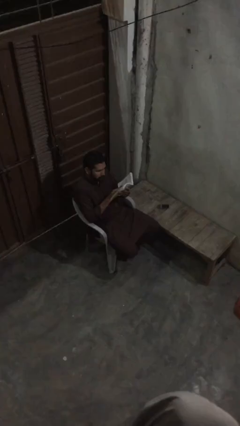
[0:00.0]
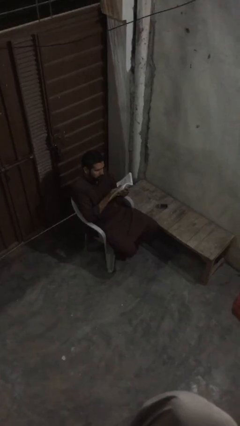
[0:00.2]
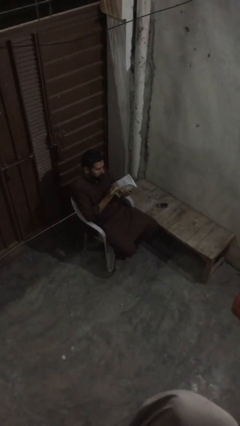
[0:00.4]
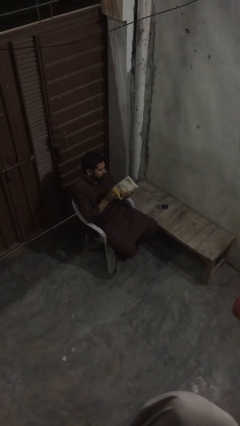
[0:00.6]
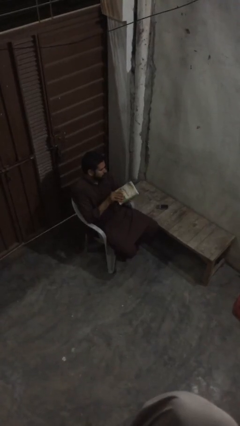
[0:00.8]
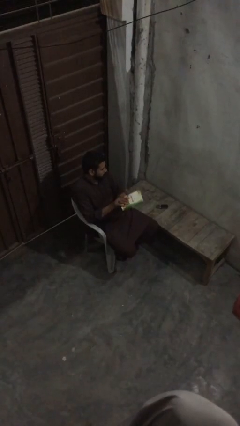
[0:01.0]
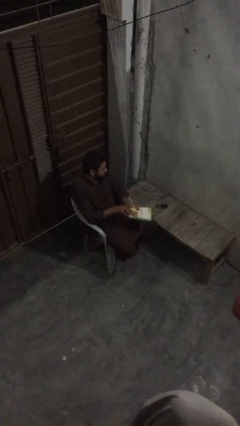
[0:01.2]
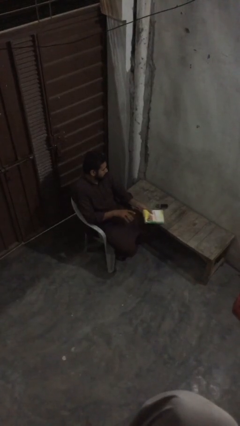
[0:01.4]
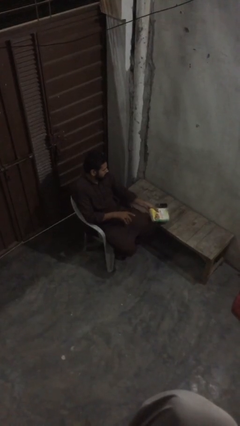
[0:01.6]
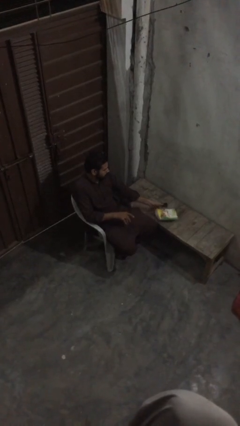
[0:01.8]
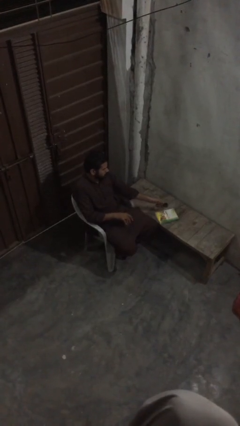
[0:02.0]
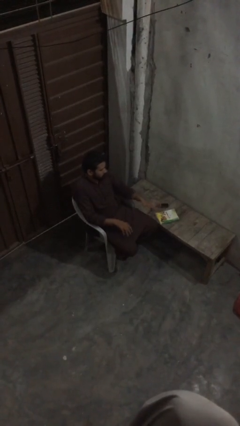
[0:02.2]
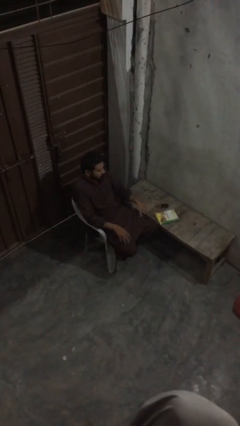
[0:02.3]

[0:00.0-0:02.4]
person puts down object on table

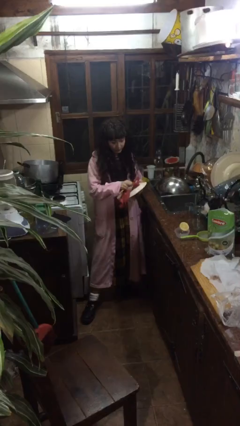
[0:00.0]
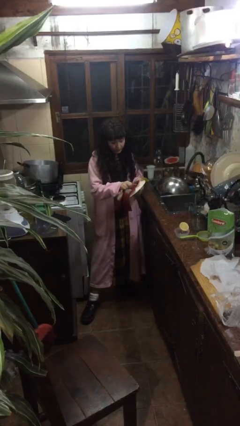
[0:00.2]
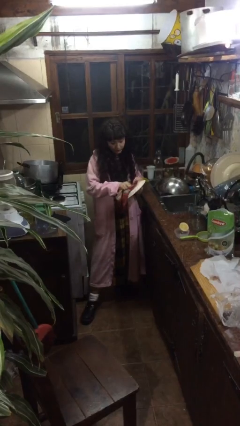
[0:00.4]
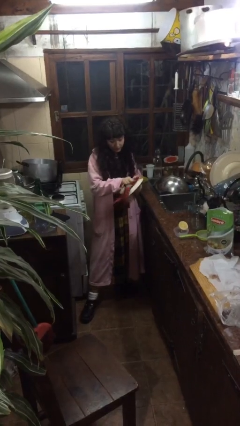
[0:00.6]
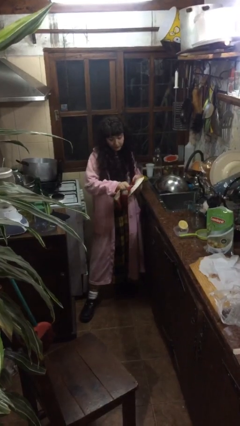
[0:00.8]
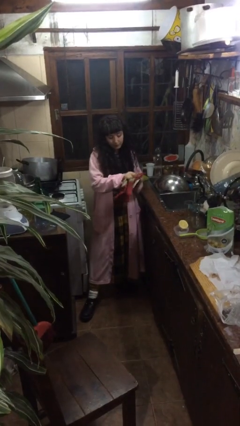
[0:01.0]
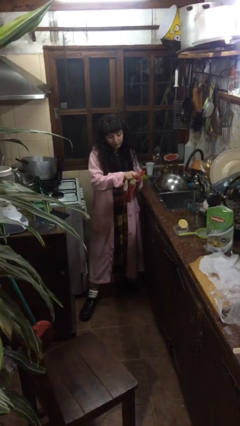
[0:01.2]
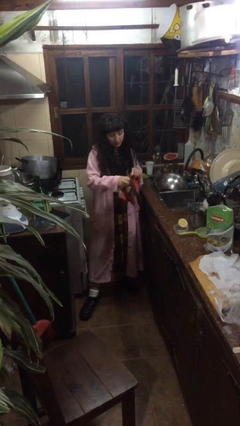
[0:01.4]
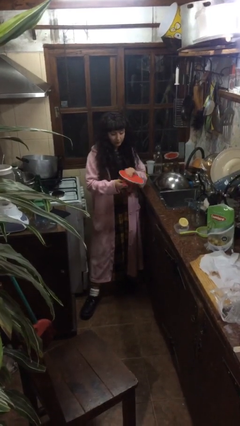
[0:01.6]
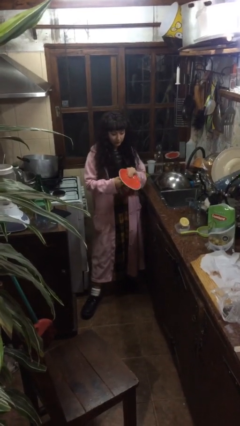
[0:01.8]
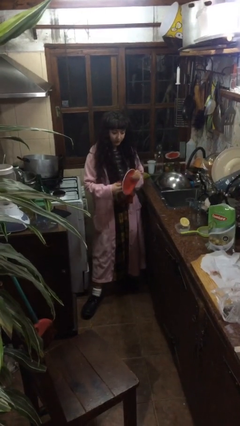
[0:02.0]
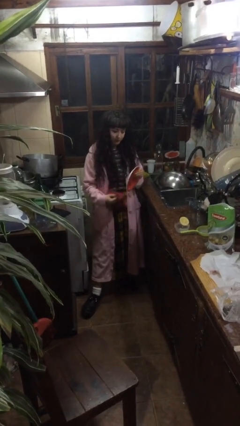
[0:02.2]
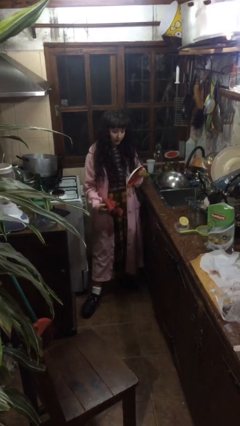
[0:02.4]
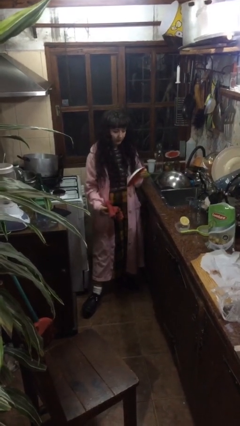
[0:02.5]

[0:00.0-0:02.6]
person dries dish

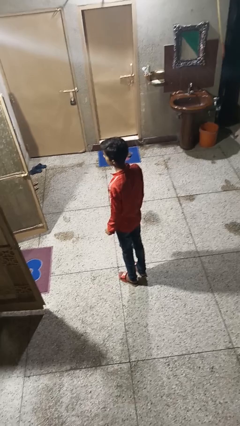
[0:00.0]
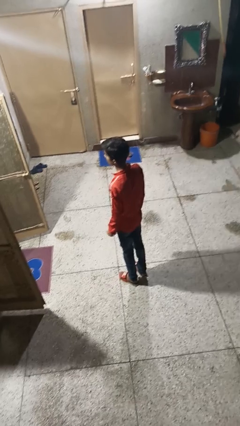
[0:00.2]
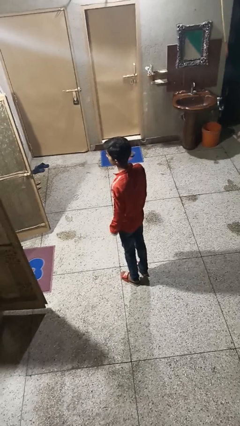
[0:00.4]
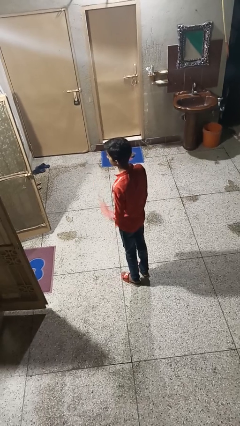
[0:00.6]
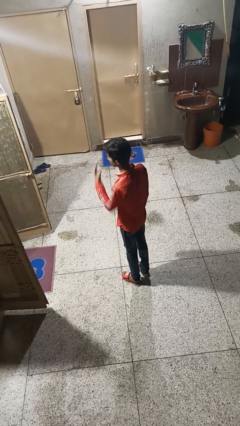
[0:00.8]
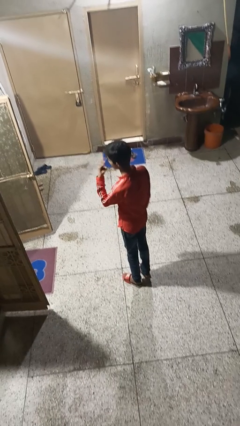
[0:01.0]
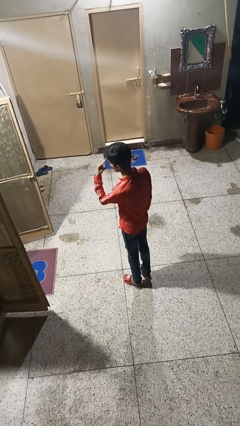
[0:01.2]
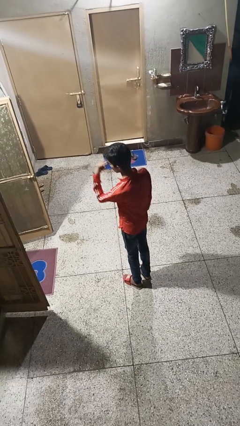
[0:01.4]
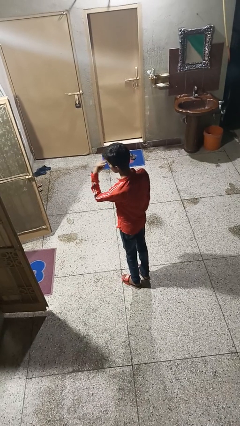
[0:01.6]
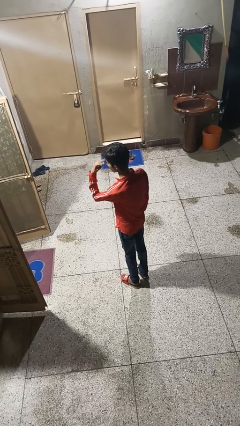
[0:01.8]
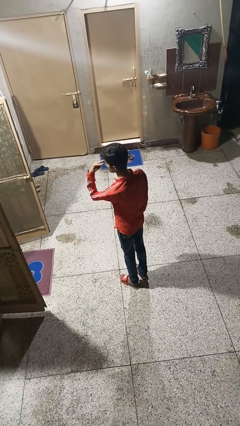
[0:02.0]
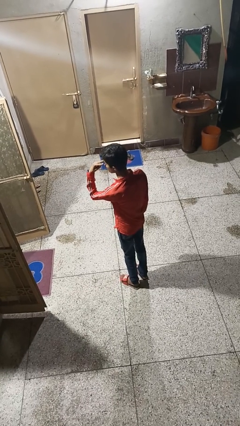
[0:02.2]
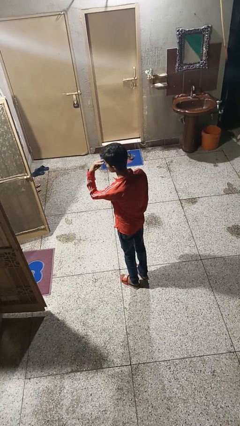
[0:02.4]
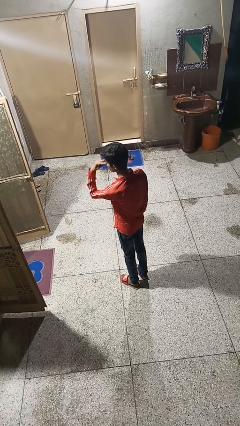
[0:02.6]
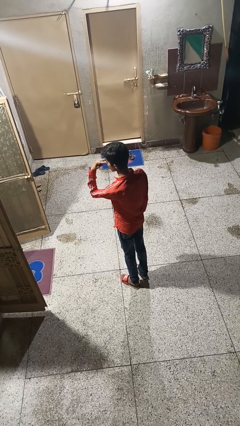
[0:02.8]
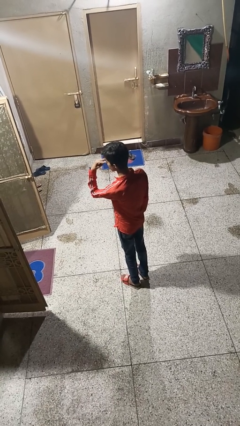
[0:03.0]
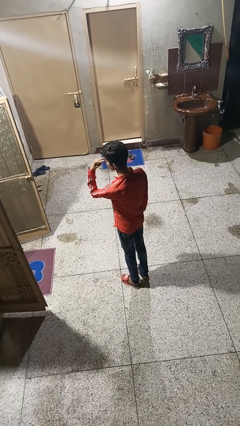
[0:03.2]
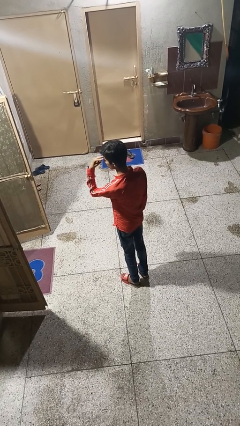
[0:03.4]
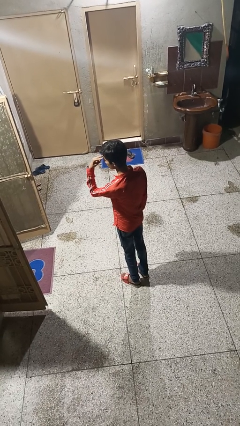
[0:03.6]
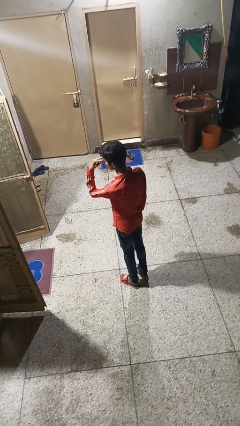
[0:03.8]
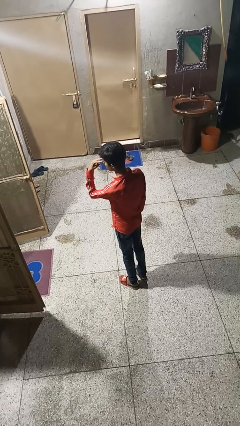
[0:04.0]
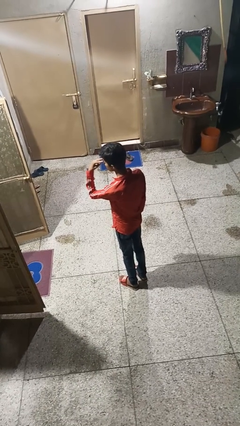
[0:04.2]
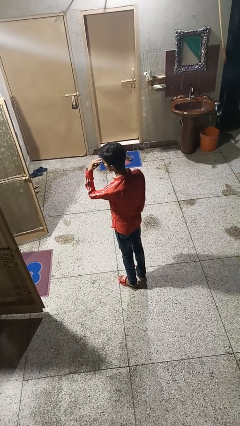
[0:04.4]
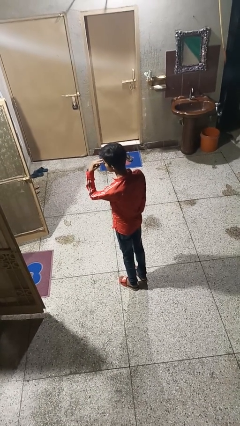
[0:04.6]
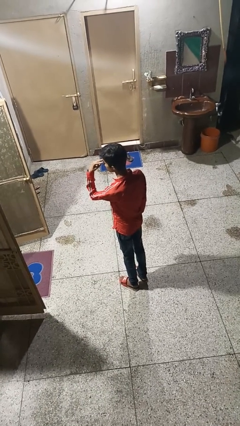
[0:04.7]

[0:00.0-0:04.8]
person gestures watch closely

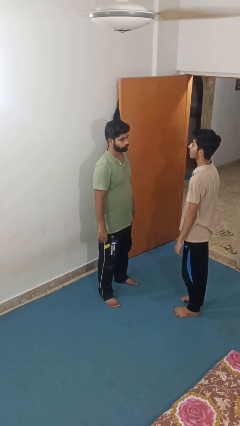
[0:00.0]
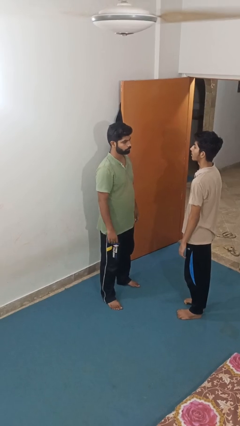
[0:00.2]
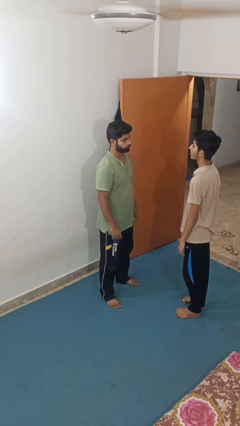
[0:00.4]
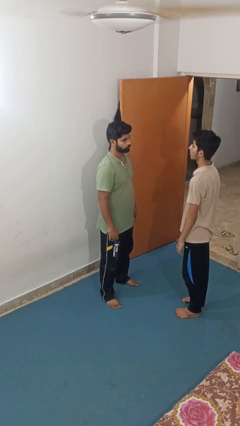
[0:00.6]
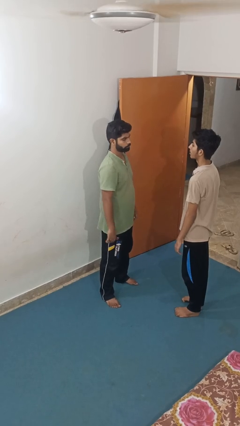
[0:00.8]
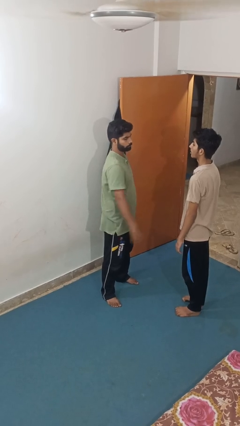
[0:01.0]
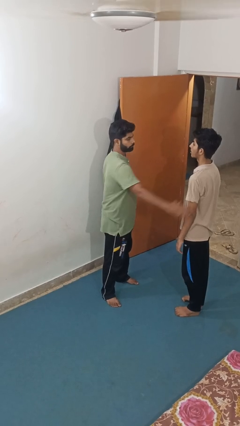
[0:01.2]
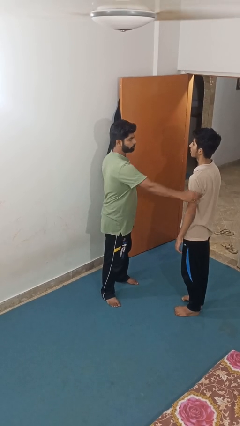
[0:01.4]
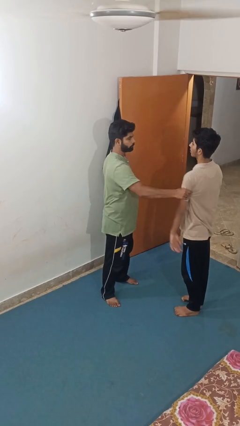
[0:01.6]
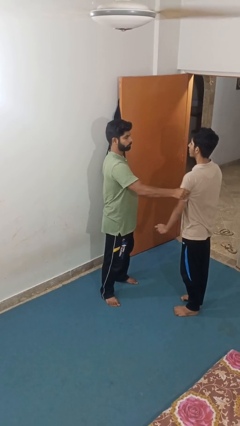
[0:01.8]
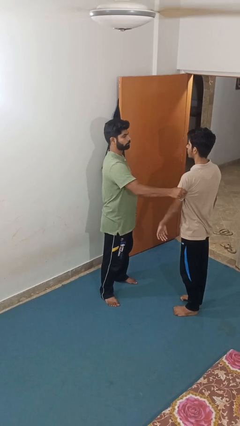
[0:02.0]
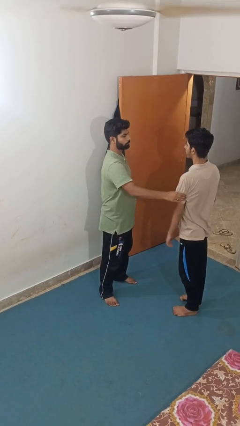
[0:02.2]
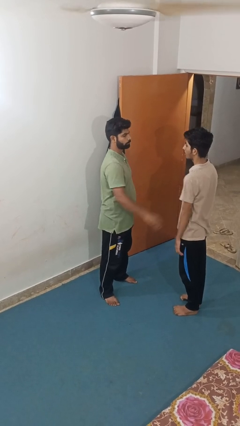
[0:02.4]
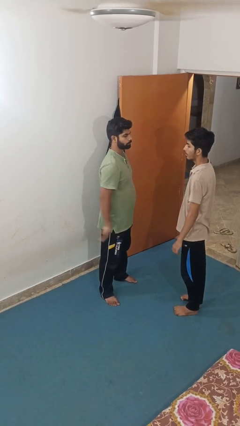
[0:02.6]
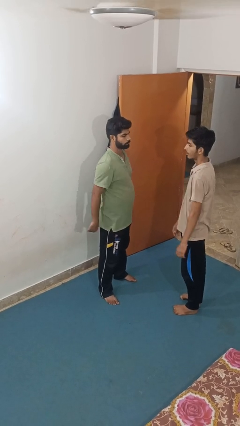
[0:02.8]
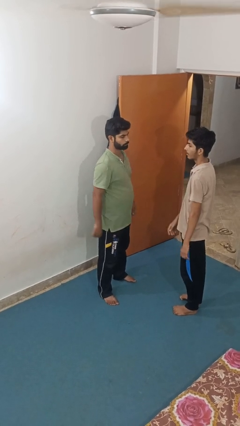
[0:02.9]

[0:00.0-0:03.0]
person grabs person by bicep

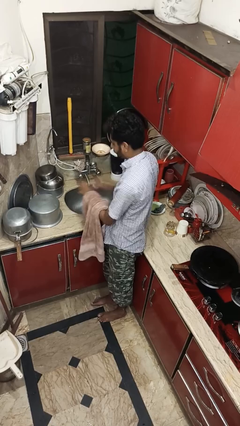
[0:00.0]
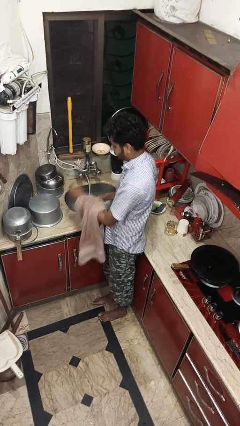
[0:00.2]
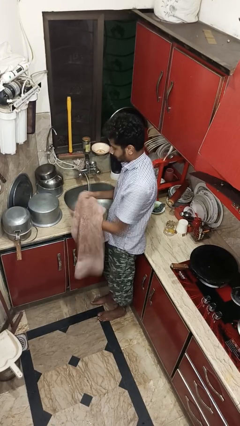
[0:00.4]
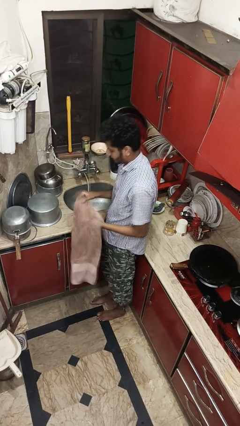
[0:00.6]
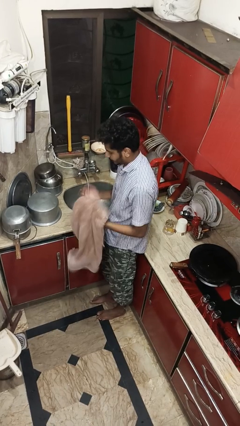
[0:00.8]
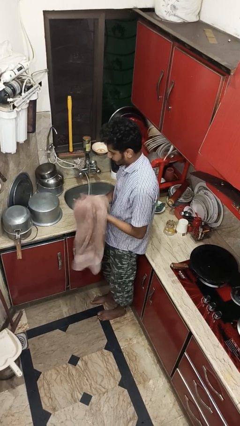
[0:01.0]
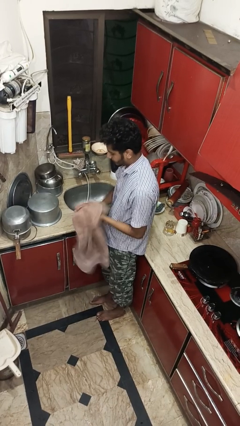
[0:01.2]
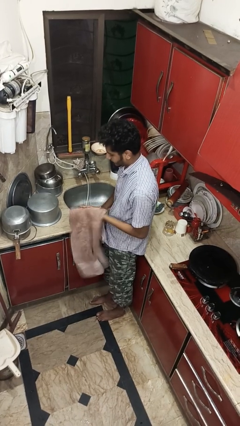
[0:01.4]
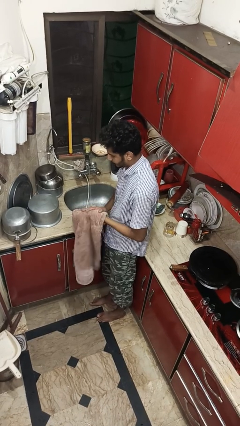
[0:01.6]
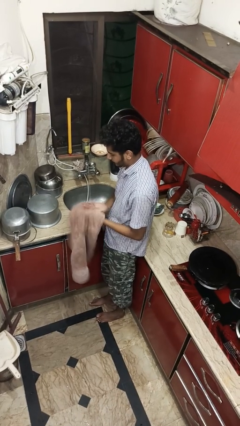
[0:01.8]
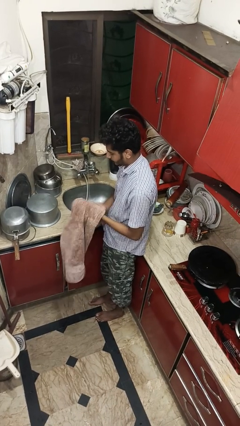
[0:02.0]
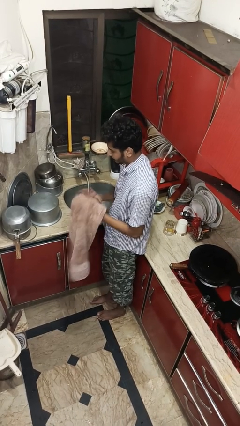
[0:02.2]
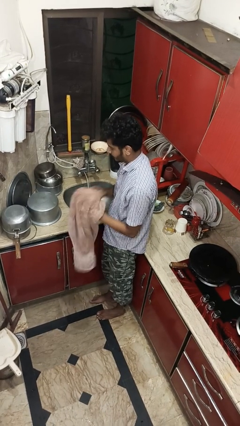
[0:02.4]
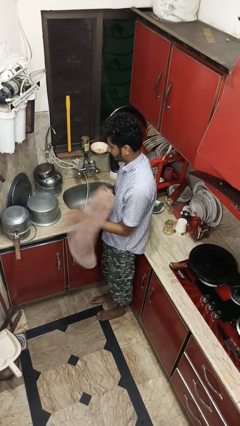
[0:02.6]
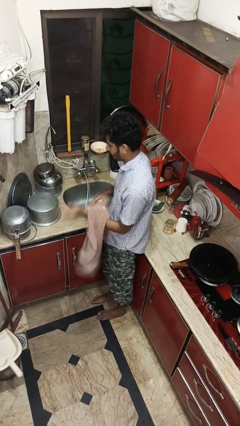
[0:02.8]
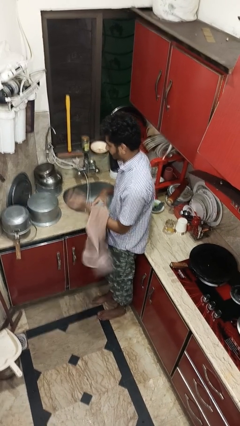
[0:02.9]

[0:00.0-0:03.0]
person dries hands with towel

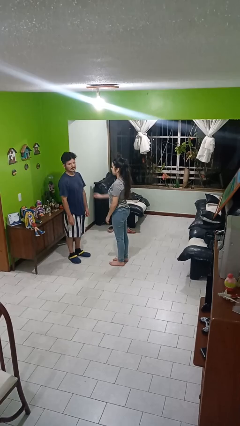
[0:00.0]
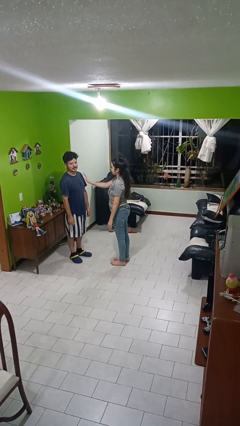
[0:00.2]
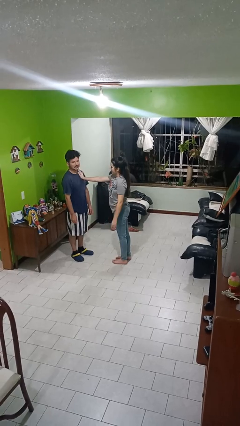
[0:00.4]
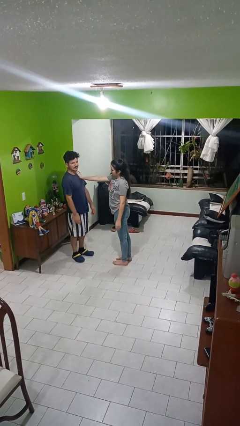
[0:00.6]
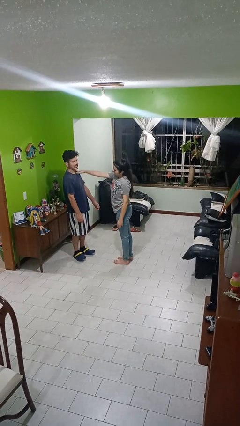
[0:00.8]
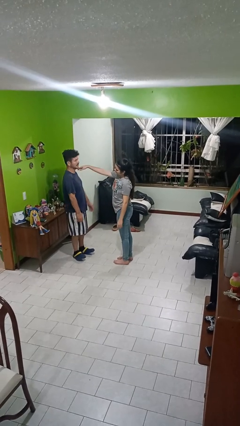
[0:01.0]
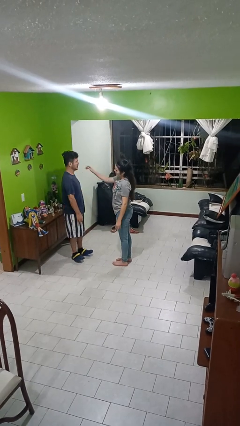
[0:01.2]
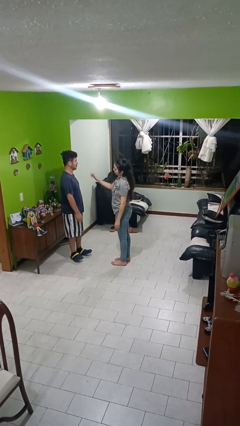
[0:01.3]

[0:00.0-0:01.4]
person shoves person
